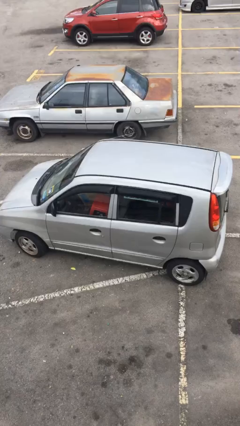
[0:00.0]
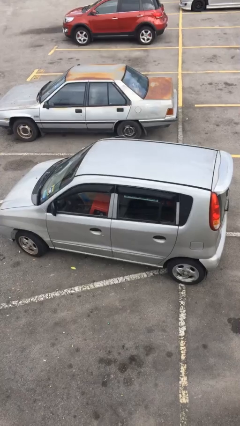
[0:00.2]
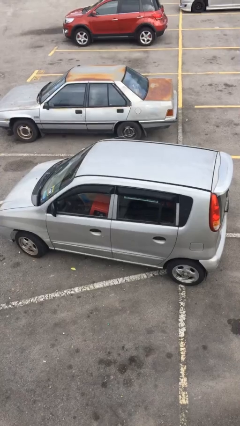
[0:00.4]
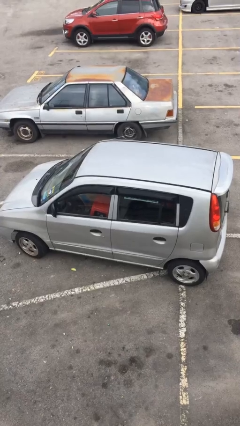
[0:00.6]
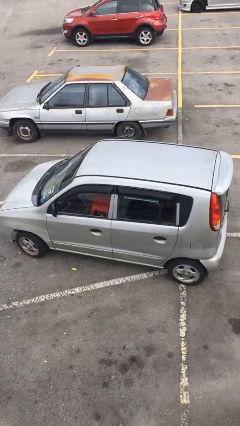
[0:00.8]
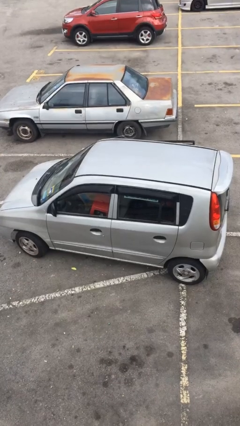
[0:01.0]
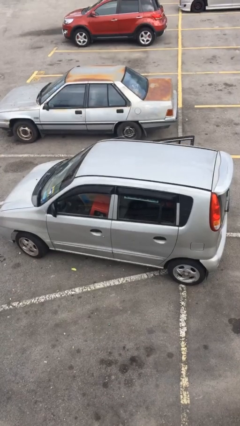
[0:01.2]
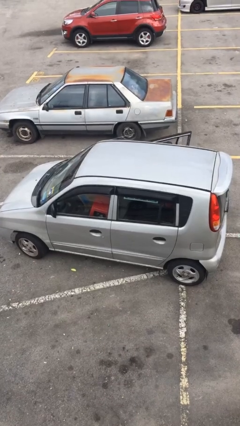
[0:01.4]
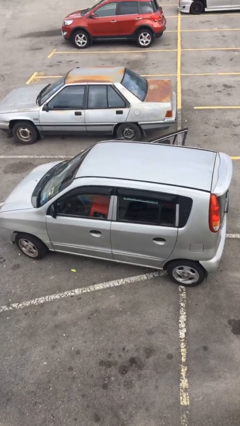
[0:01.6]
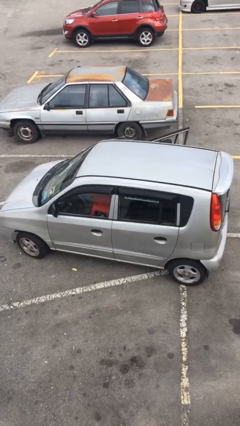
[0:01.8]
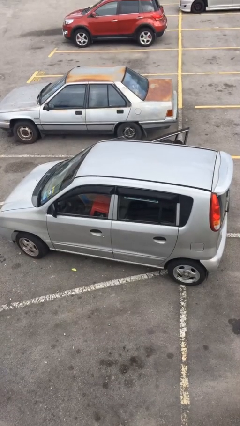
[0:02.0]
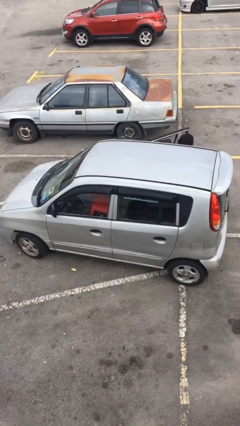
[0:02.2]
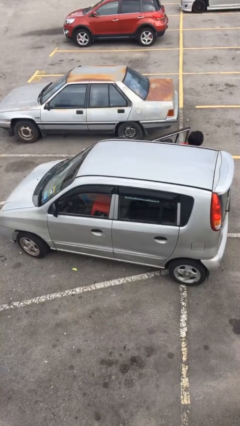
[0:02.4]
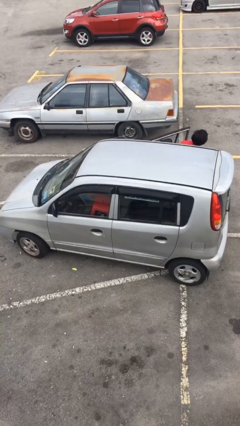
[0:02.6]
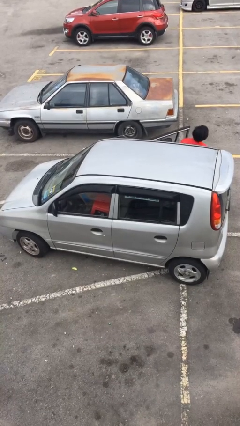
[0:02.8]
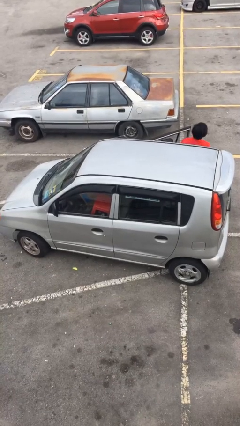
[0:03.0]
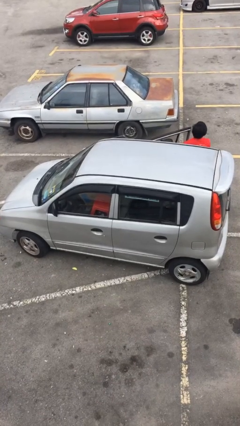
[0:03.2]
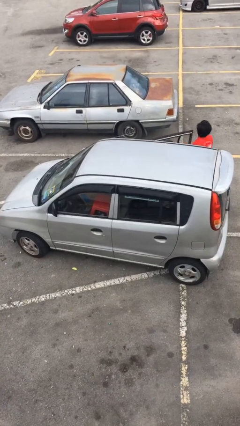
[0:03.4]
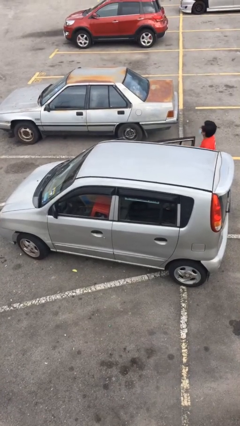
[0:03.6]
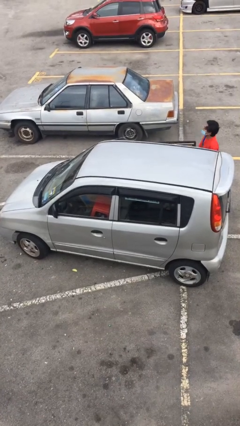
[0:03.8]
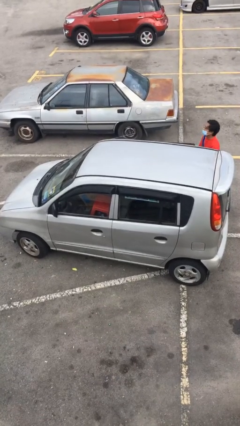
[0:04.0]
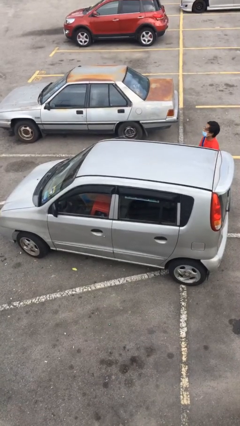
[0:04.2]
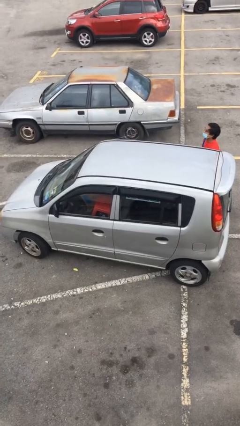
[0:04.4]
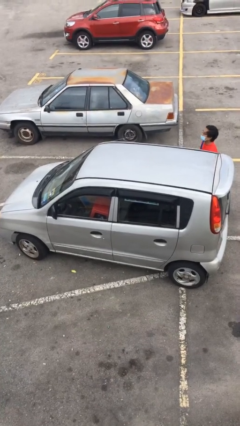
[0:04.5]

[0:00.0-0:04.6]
car drops off person

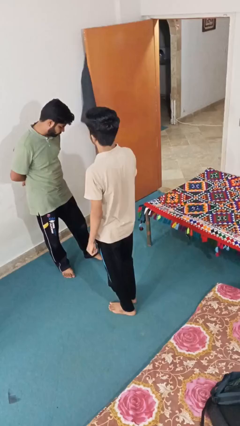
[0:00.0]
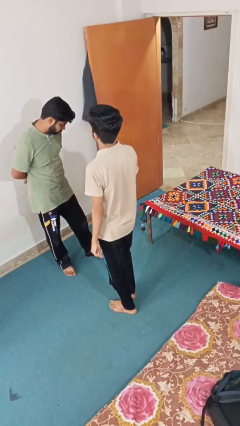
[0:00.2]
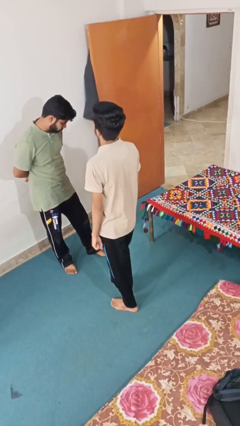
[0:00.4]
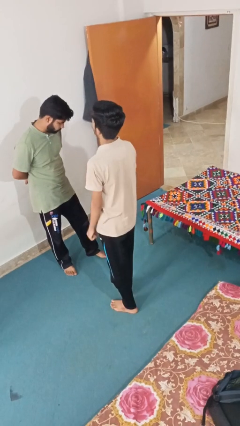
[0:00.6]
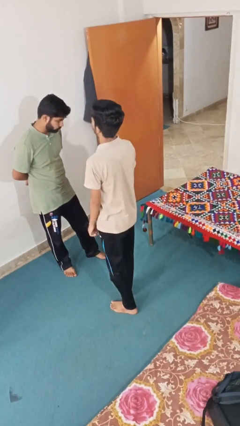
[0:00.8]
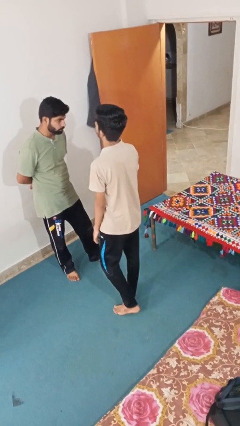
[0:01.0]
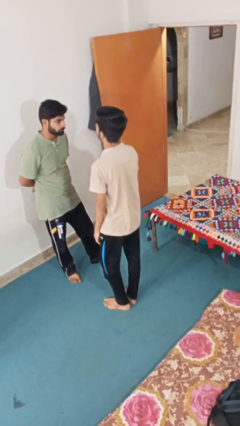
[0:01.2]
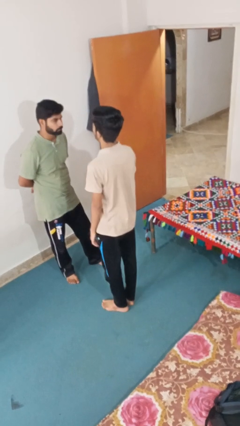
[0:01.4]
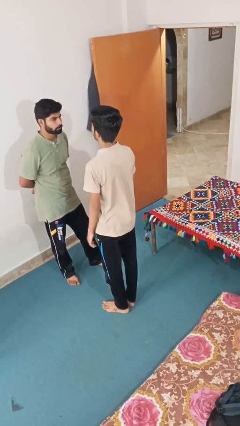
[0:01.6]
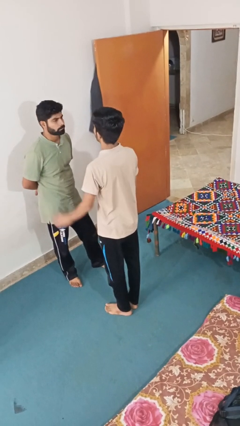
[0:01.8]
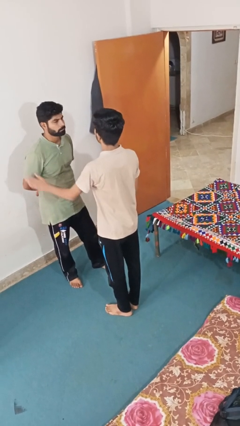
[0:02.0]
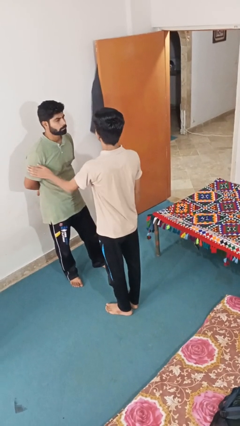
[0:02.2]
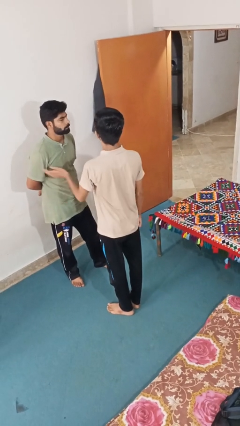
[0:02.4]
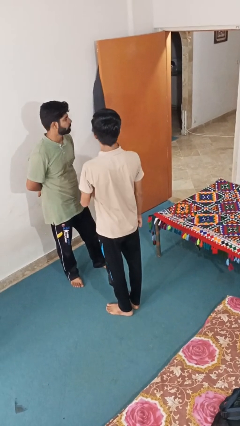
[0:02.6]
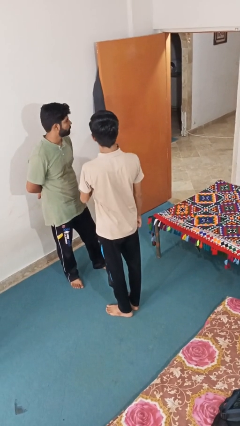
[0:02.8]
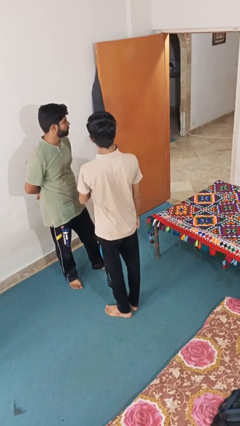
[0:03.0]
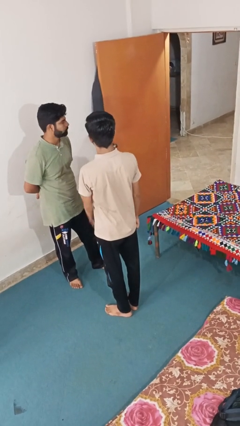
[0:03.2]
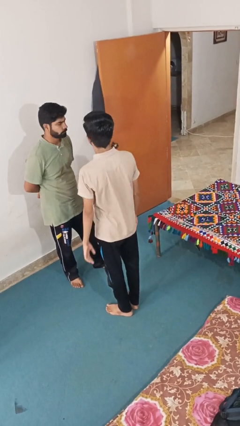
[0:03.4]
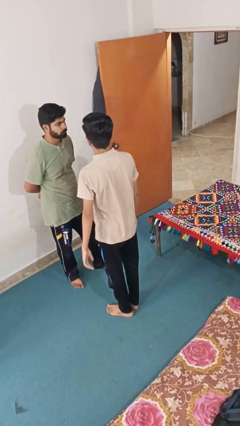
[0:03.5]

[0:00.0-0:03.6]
person shoves person

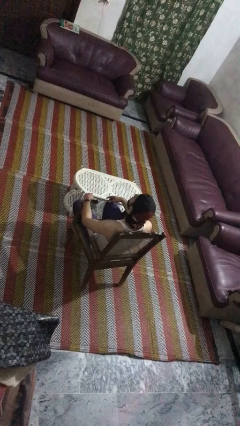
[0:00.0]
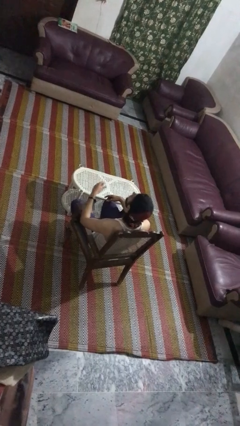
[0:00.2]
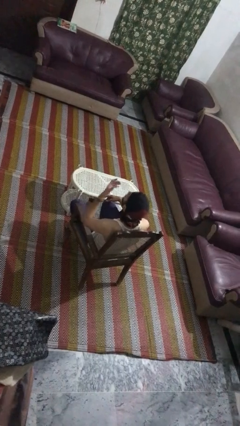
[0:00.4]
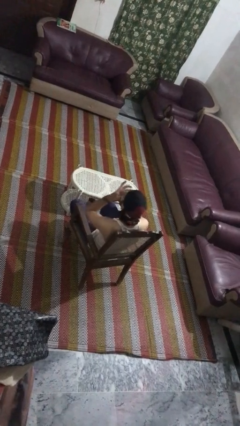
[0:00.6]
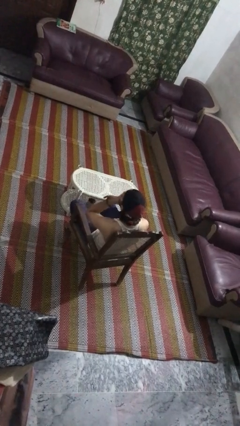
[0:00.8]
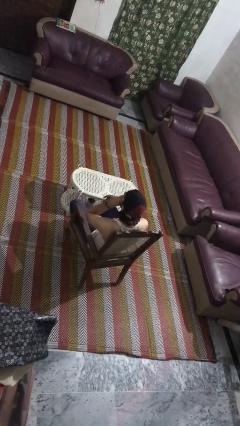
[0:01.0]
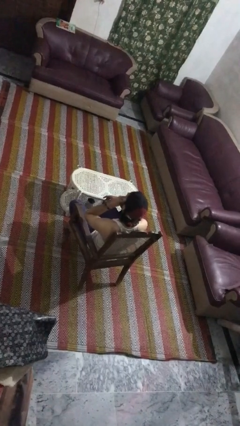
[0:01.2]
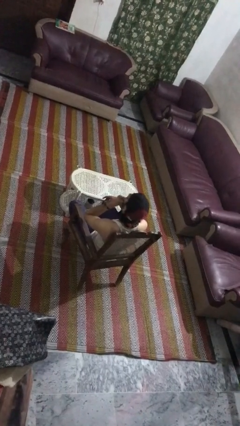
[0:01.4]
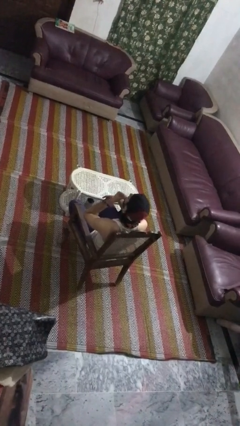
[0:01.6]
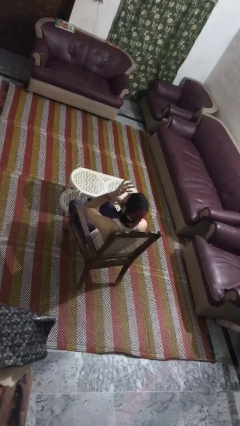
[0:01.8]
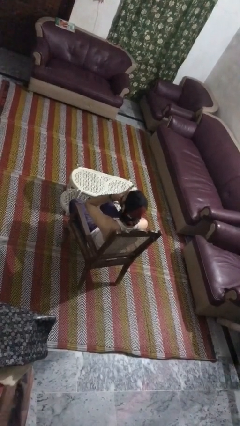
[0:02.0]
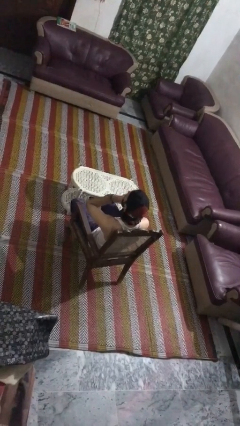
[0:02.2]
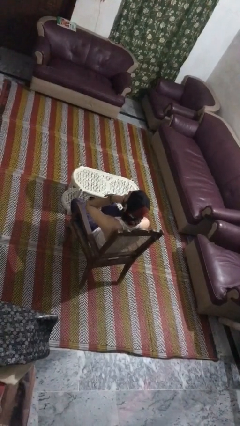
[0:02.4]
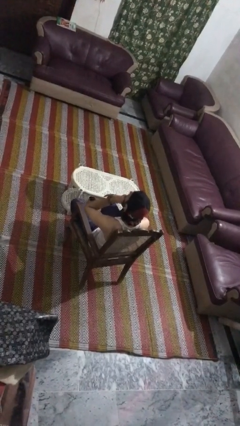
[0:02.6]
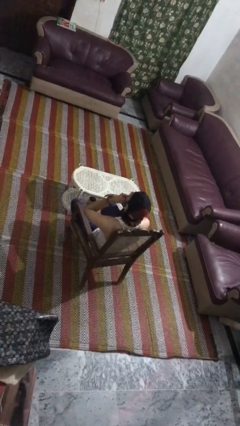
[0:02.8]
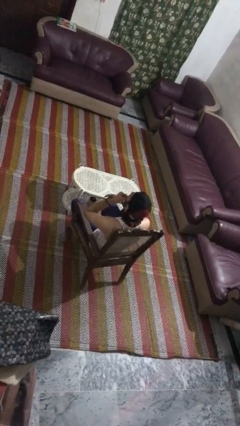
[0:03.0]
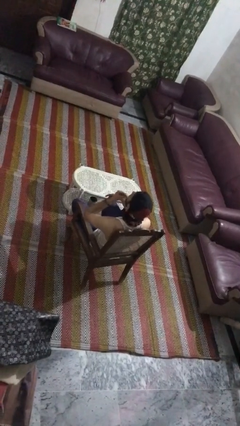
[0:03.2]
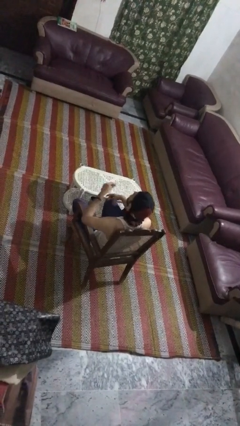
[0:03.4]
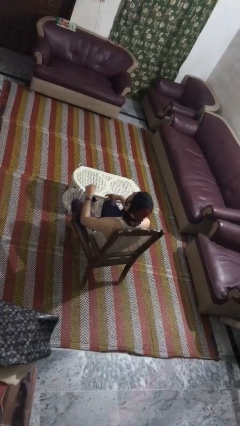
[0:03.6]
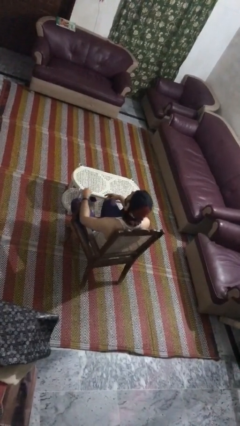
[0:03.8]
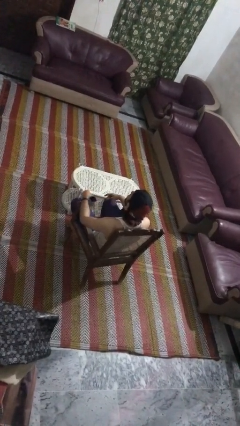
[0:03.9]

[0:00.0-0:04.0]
person strokes chin

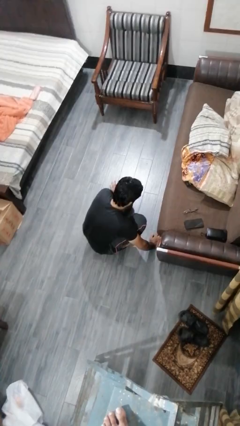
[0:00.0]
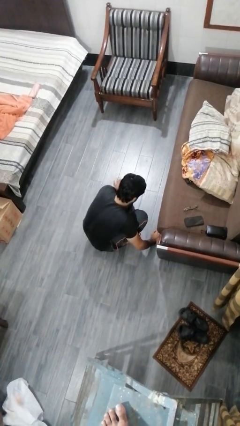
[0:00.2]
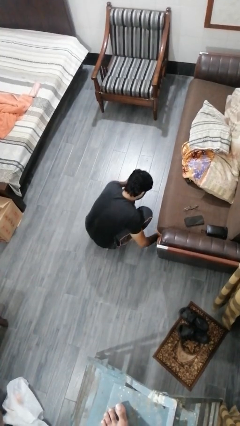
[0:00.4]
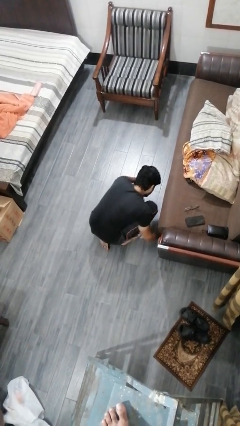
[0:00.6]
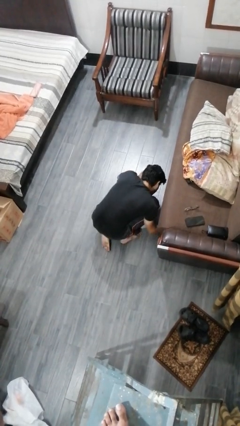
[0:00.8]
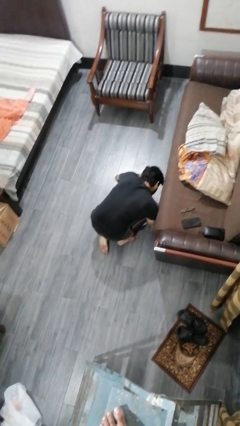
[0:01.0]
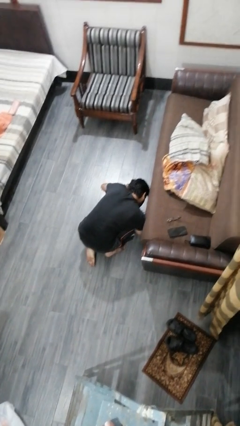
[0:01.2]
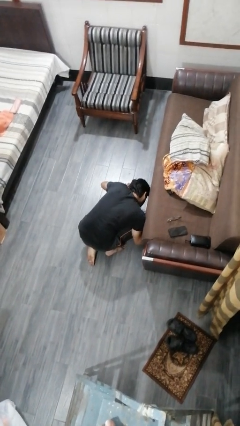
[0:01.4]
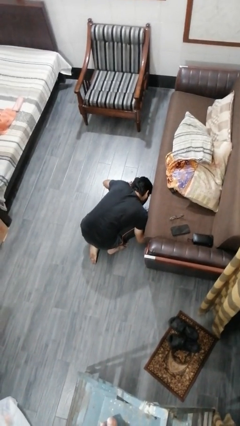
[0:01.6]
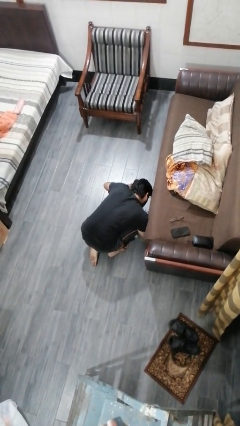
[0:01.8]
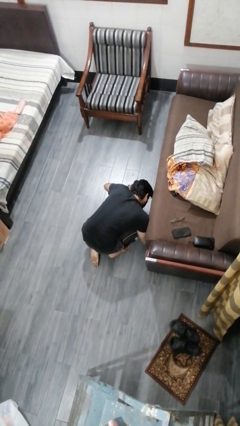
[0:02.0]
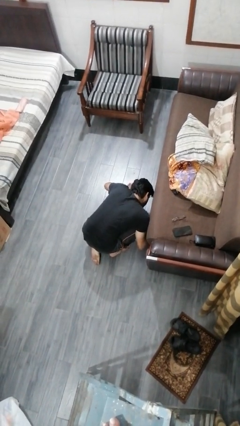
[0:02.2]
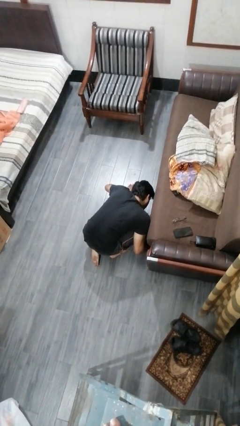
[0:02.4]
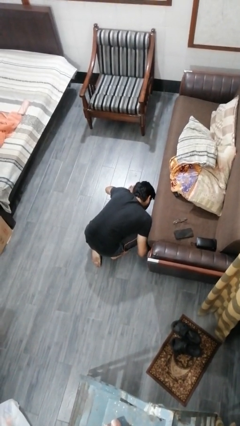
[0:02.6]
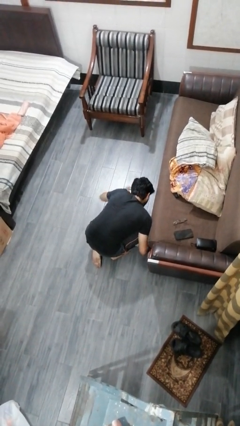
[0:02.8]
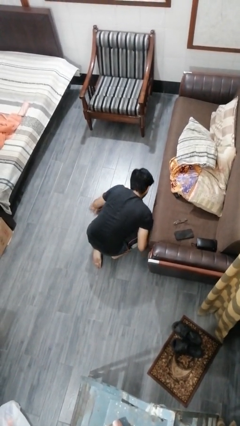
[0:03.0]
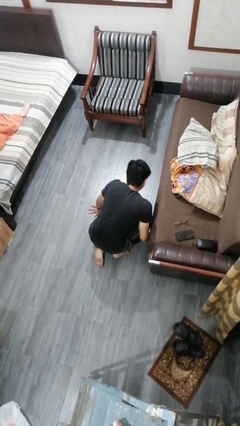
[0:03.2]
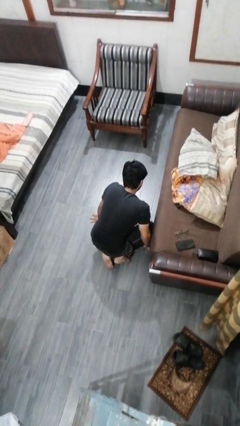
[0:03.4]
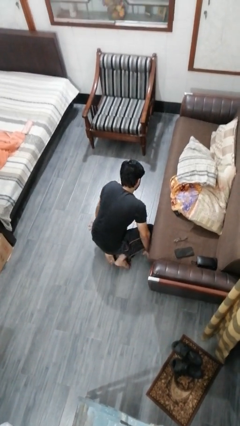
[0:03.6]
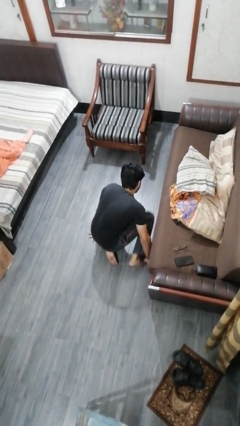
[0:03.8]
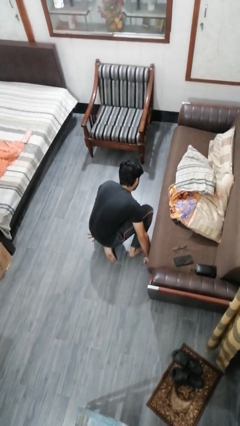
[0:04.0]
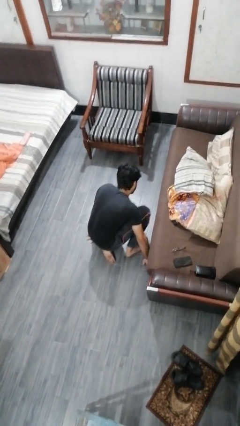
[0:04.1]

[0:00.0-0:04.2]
person searches under couch

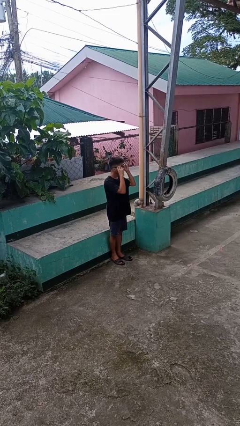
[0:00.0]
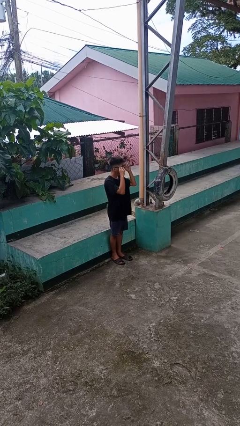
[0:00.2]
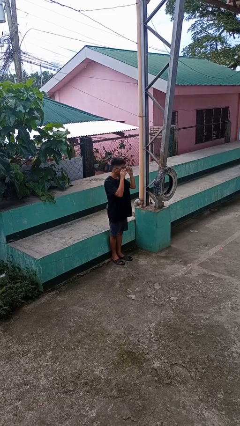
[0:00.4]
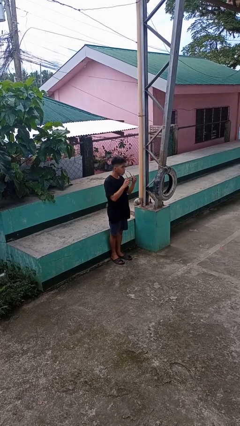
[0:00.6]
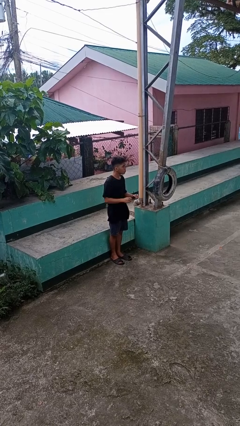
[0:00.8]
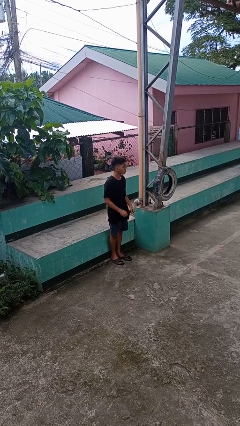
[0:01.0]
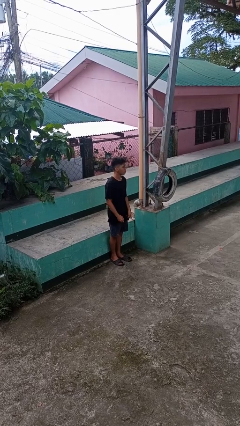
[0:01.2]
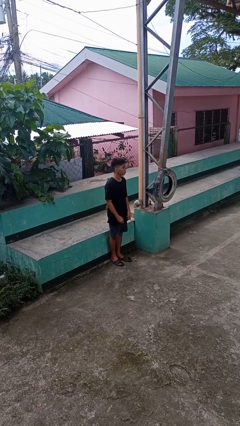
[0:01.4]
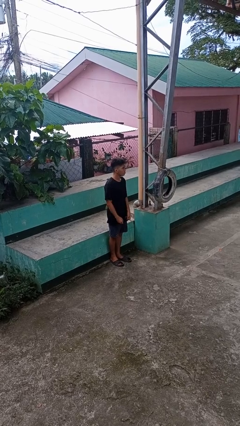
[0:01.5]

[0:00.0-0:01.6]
person takes off sunglasses
